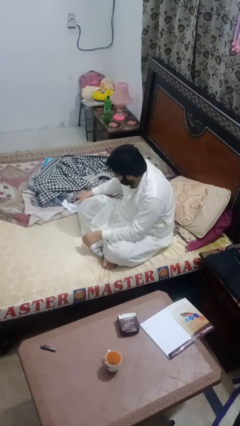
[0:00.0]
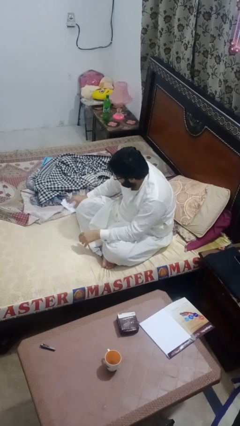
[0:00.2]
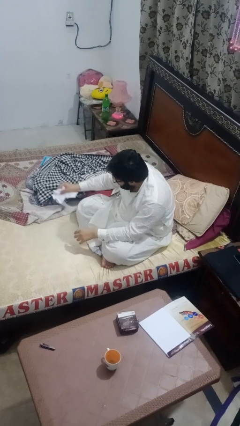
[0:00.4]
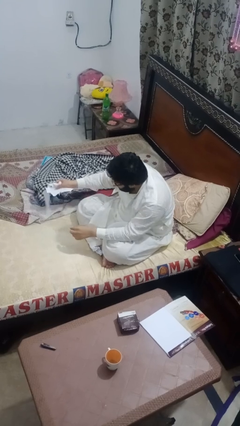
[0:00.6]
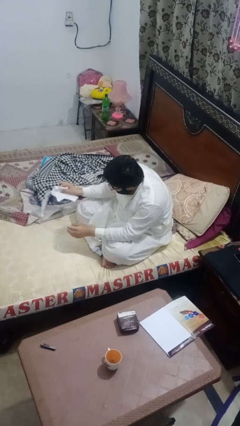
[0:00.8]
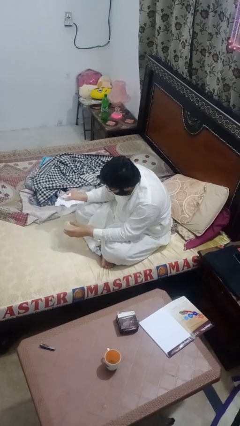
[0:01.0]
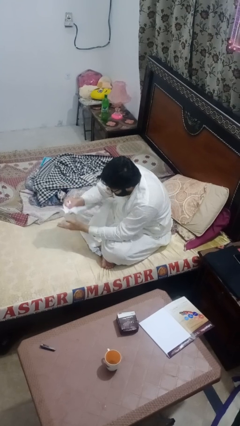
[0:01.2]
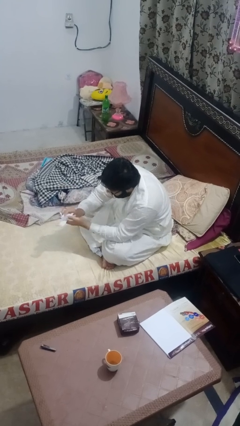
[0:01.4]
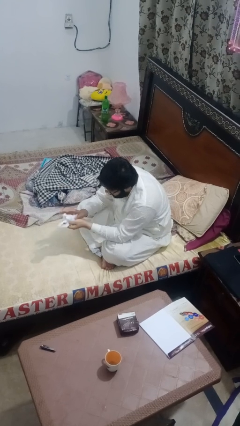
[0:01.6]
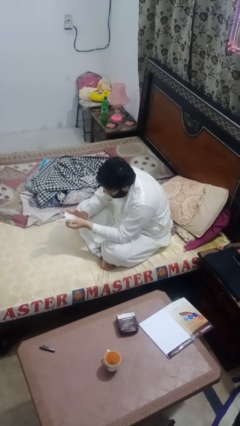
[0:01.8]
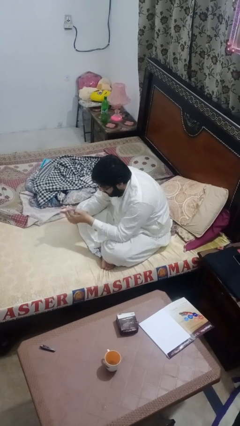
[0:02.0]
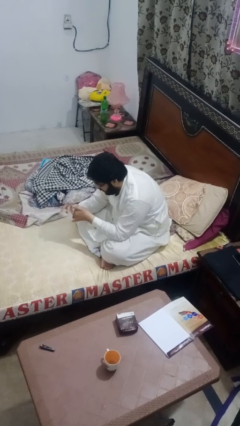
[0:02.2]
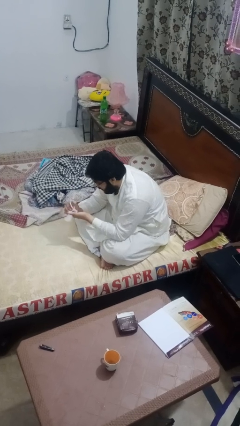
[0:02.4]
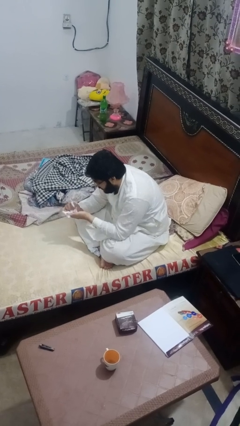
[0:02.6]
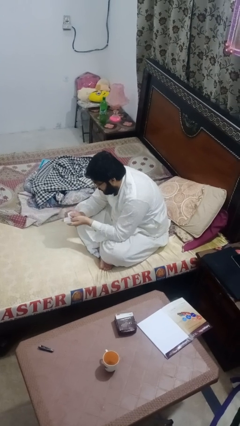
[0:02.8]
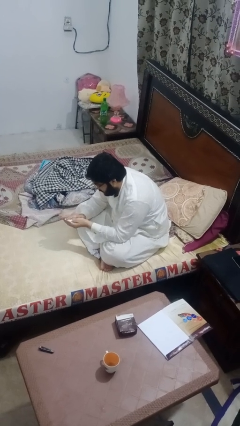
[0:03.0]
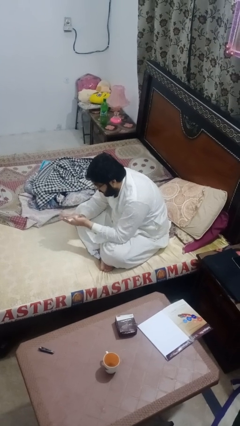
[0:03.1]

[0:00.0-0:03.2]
person crumples paper

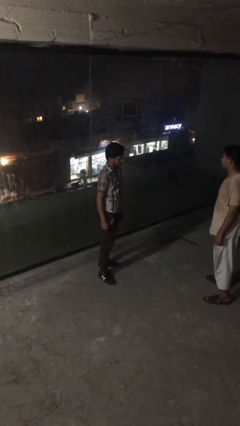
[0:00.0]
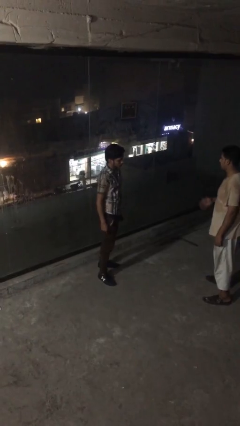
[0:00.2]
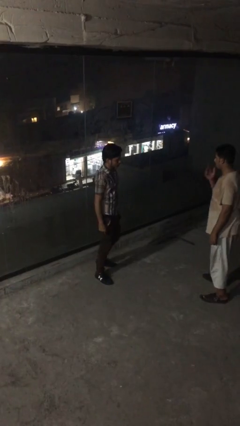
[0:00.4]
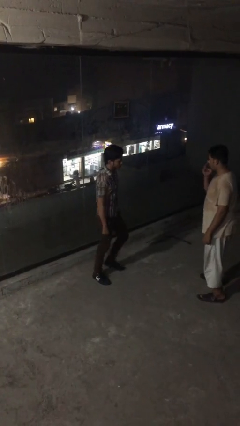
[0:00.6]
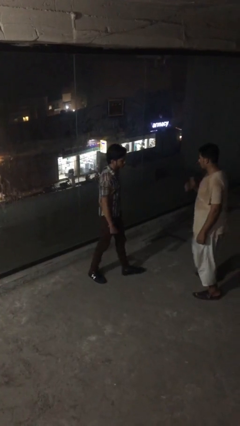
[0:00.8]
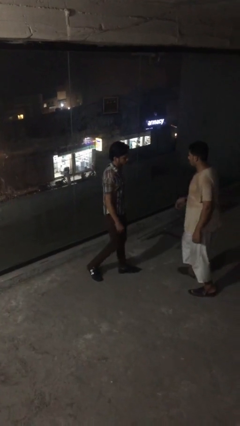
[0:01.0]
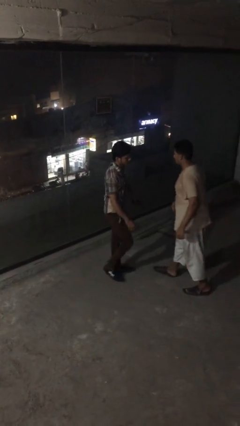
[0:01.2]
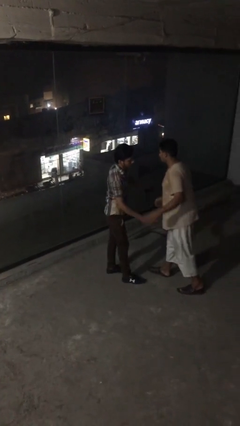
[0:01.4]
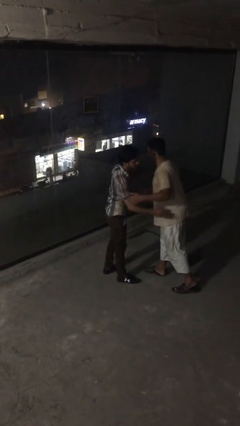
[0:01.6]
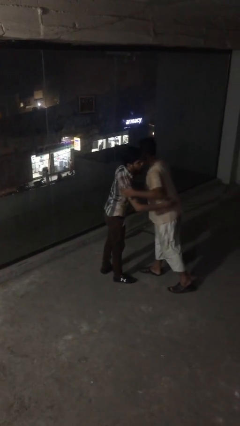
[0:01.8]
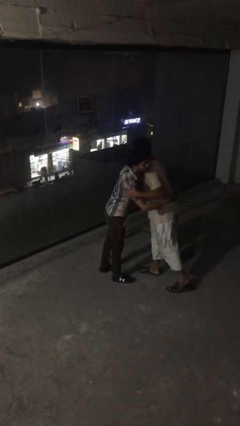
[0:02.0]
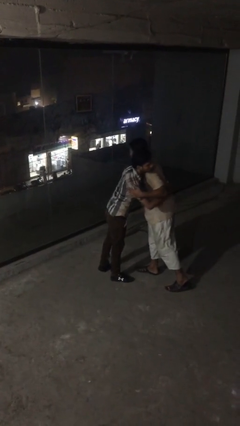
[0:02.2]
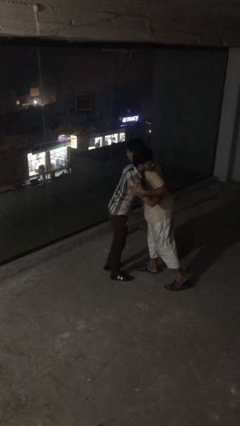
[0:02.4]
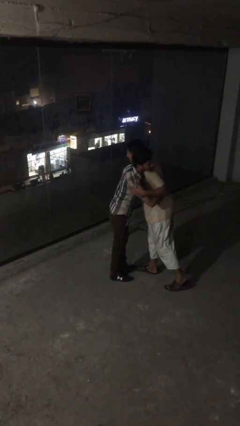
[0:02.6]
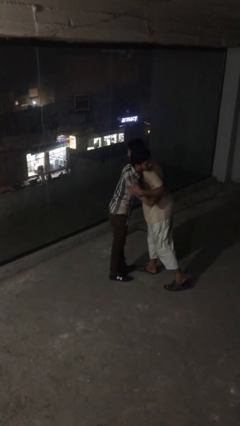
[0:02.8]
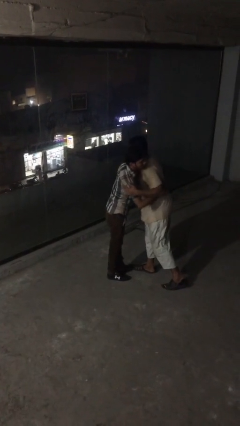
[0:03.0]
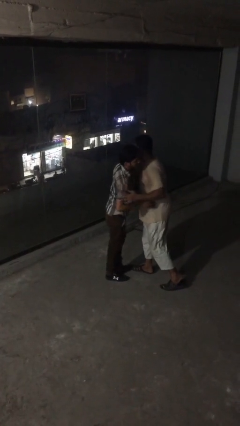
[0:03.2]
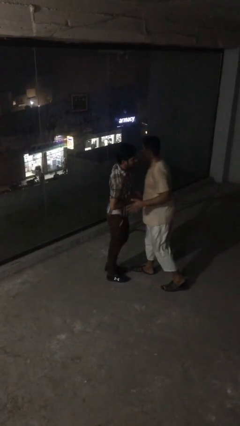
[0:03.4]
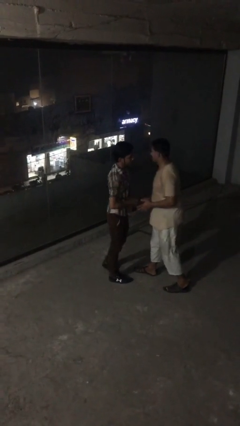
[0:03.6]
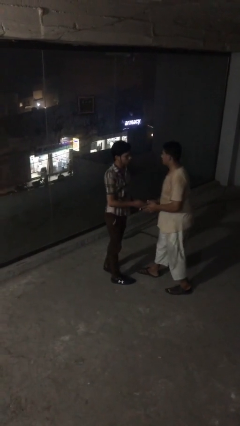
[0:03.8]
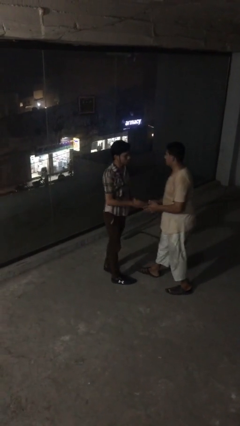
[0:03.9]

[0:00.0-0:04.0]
person embraces person

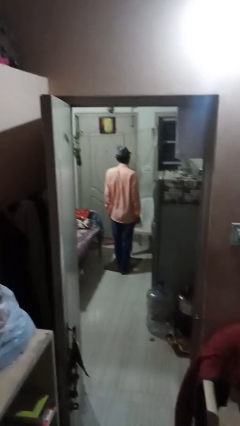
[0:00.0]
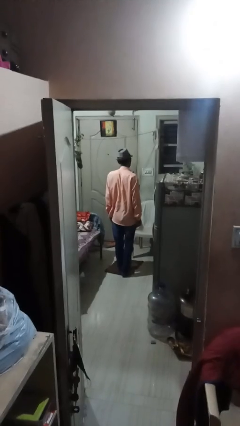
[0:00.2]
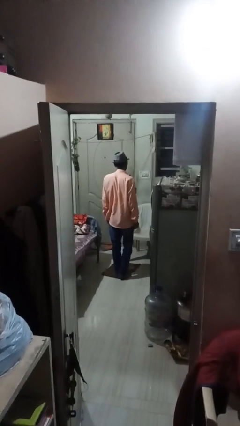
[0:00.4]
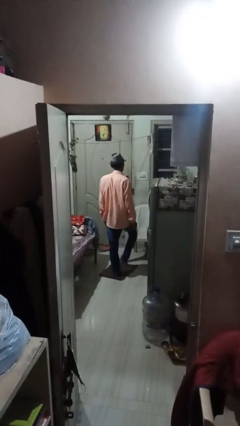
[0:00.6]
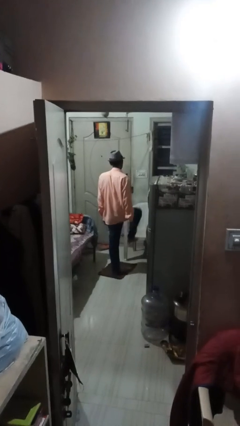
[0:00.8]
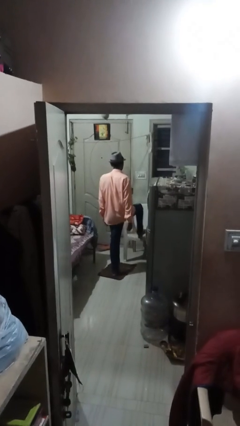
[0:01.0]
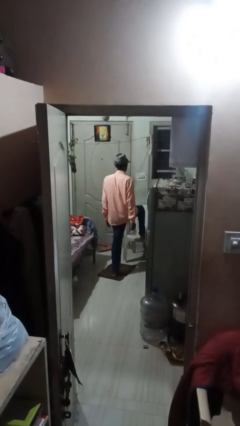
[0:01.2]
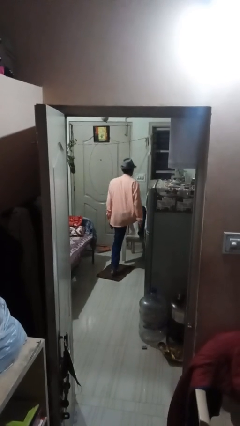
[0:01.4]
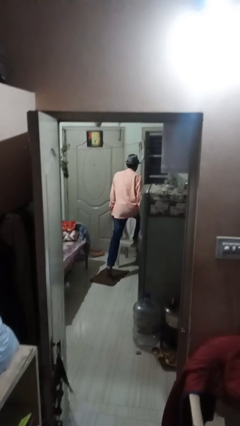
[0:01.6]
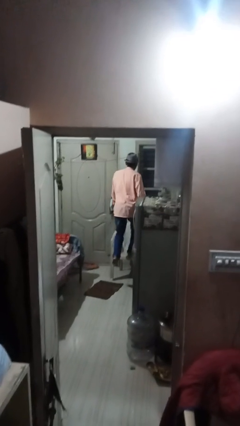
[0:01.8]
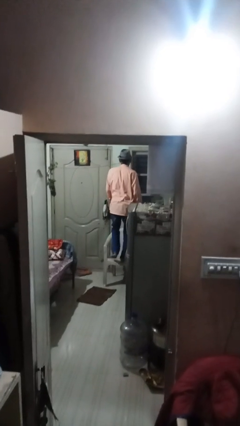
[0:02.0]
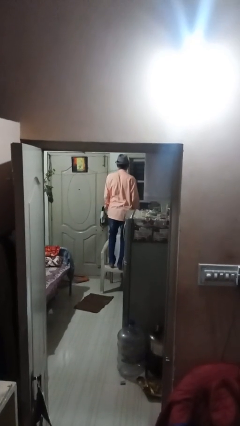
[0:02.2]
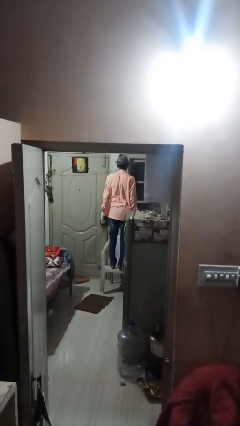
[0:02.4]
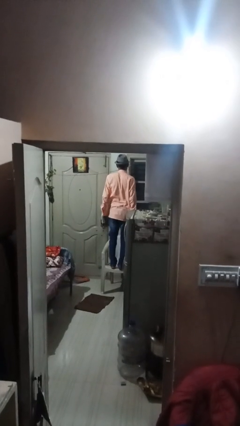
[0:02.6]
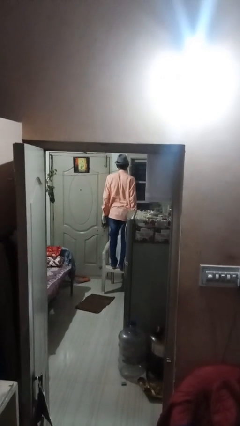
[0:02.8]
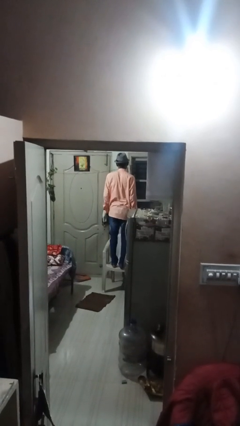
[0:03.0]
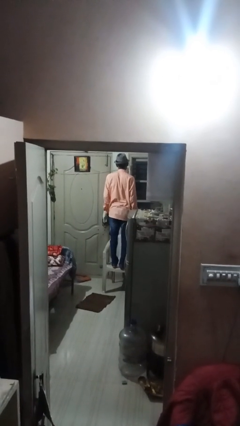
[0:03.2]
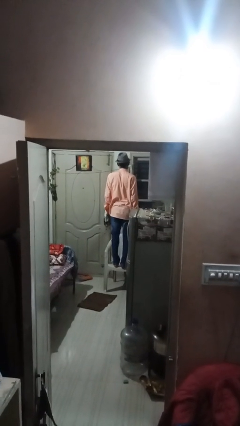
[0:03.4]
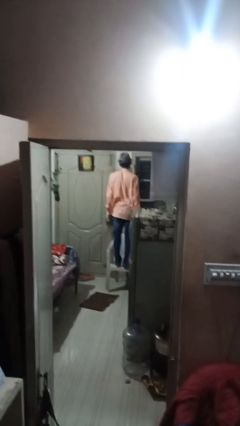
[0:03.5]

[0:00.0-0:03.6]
person climbs on chair

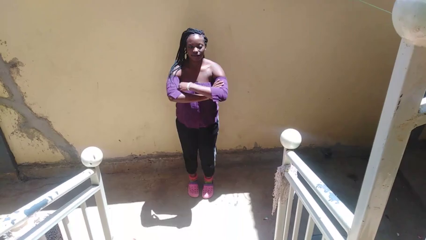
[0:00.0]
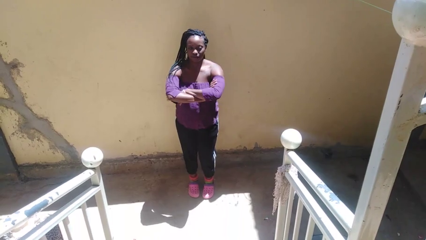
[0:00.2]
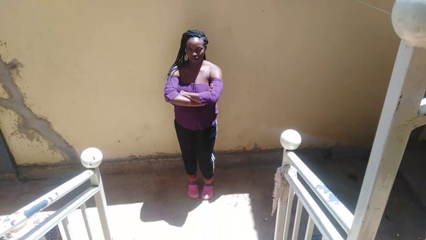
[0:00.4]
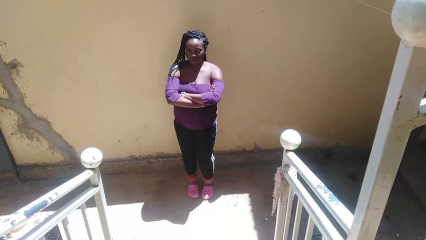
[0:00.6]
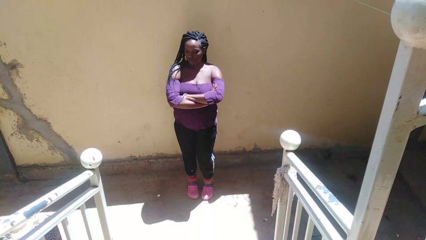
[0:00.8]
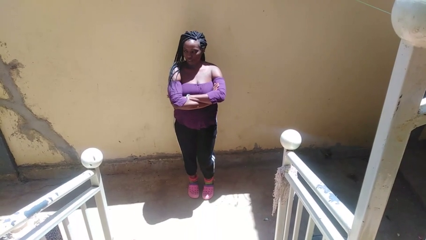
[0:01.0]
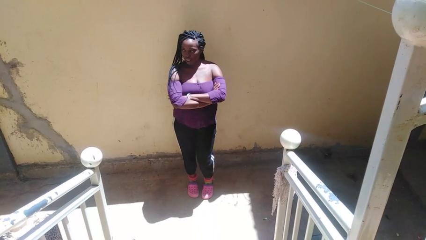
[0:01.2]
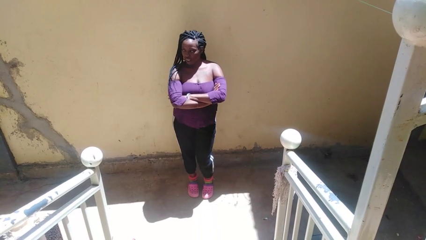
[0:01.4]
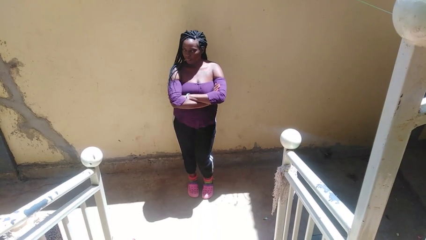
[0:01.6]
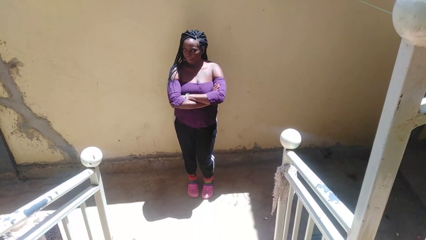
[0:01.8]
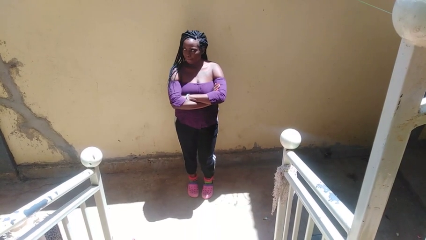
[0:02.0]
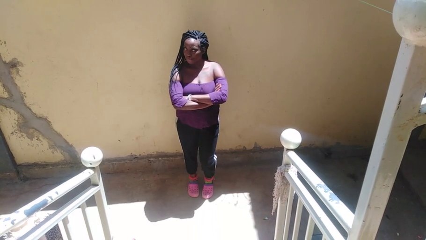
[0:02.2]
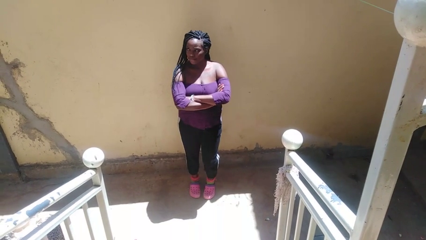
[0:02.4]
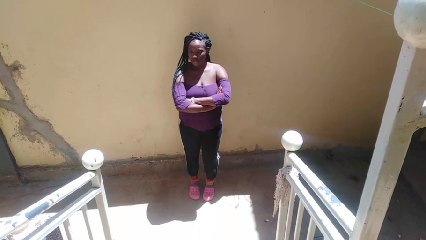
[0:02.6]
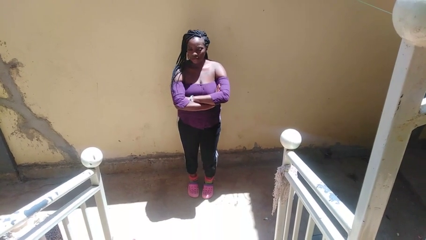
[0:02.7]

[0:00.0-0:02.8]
person crosses arms

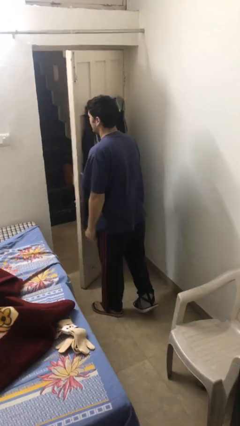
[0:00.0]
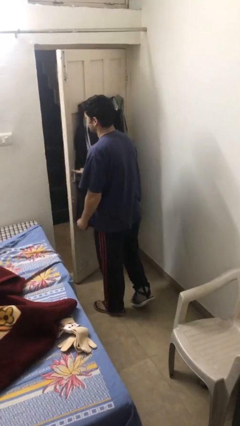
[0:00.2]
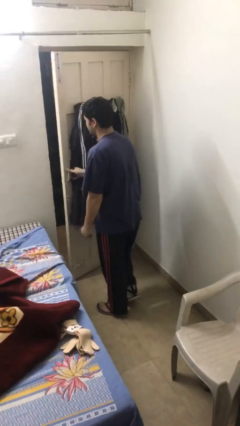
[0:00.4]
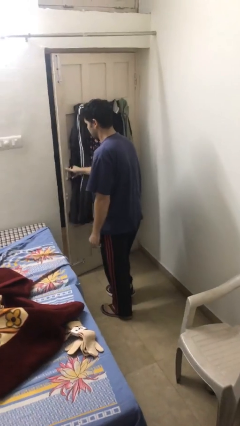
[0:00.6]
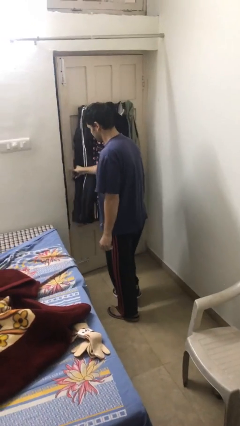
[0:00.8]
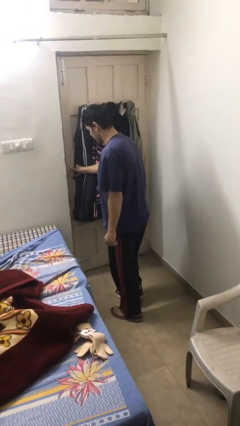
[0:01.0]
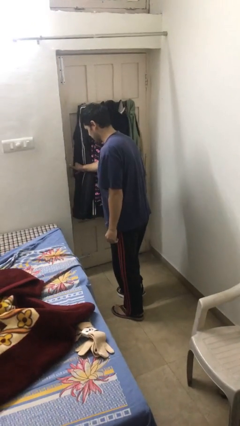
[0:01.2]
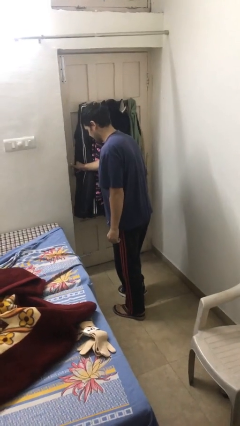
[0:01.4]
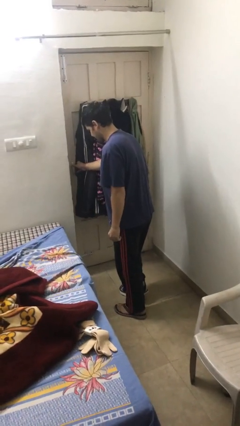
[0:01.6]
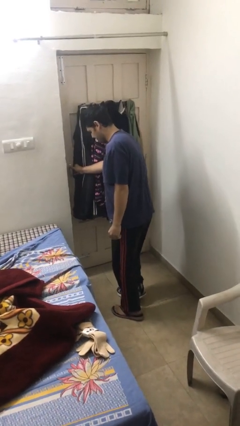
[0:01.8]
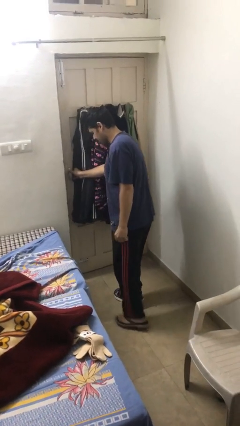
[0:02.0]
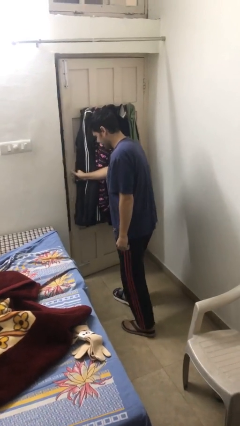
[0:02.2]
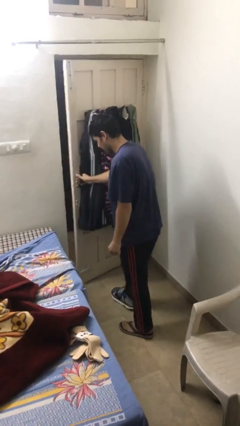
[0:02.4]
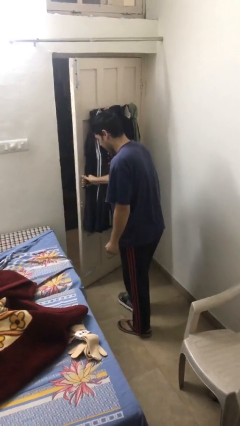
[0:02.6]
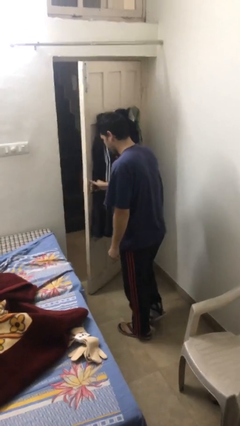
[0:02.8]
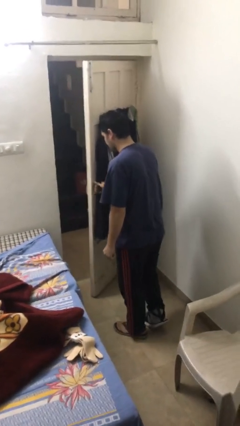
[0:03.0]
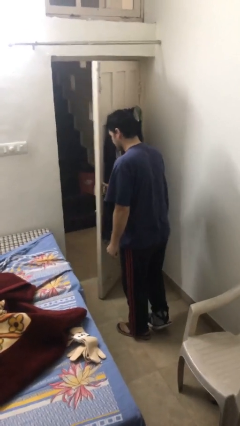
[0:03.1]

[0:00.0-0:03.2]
person closes facility door

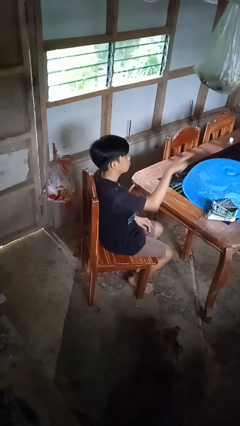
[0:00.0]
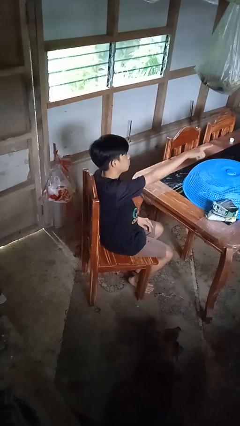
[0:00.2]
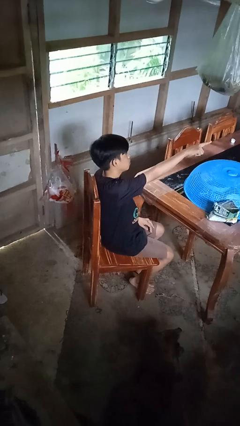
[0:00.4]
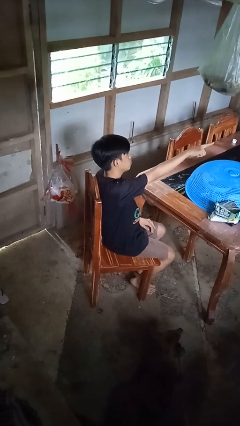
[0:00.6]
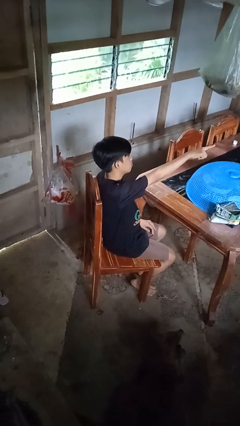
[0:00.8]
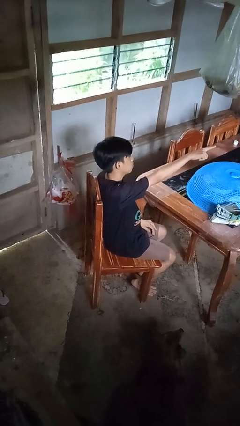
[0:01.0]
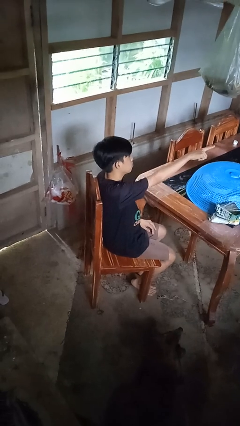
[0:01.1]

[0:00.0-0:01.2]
person points at person
